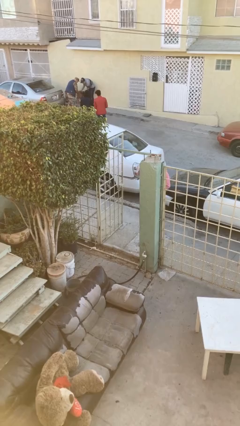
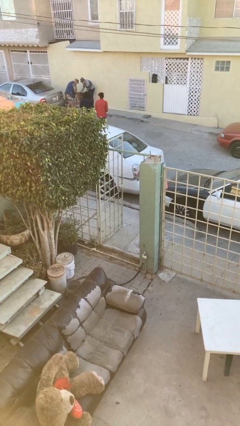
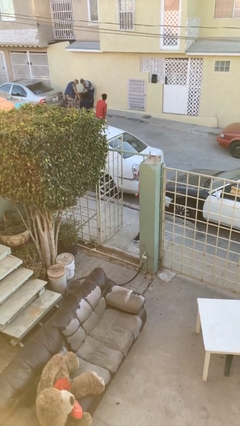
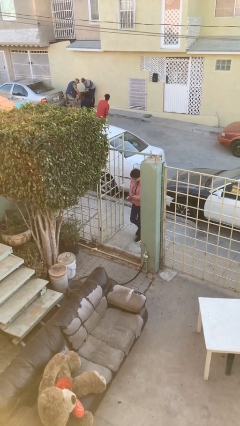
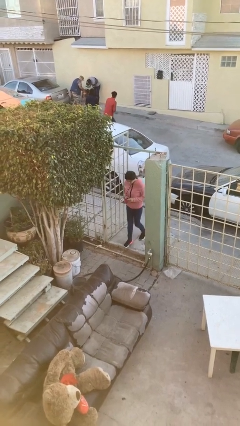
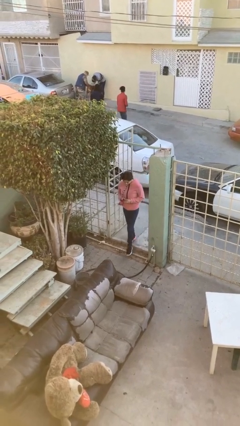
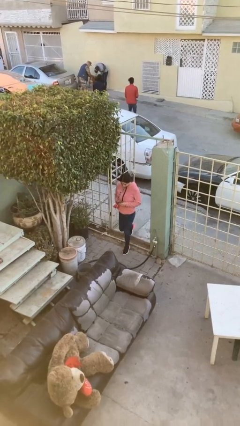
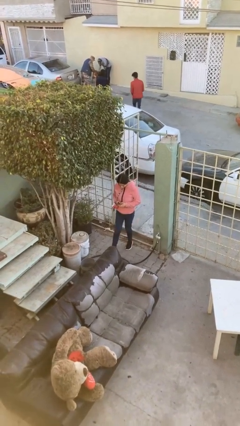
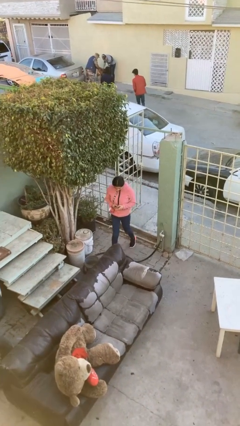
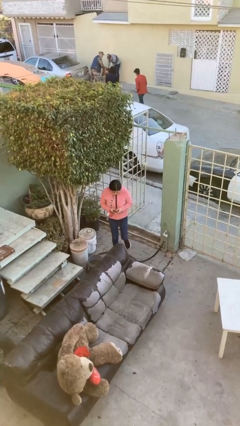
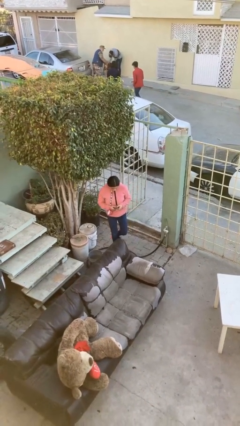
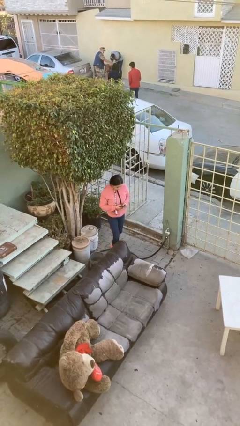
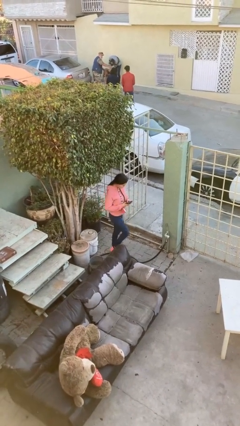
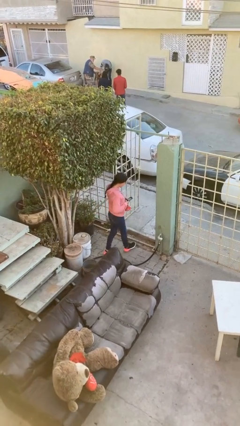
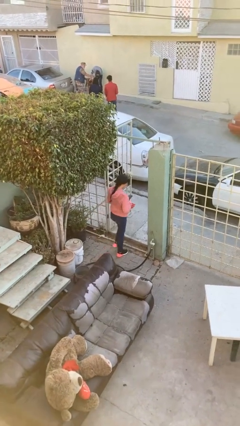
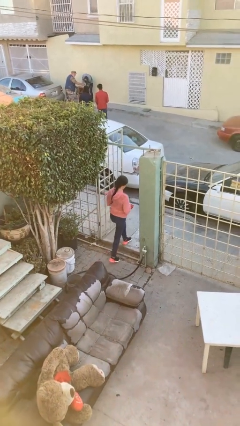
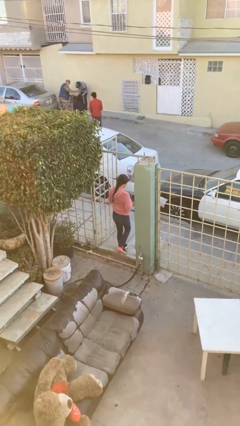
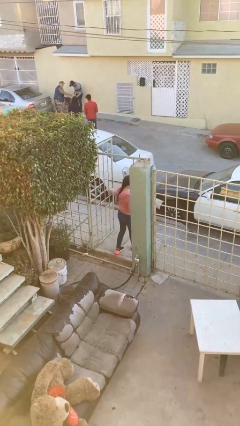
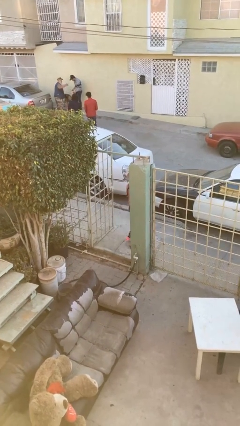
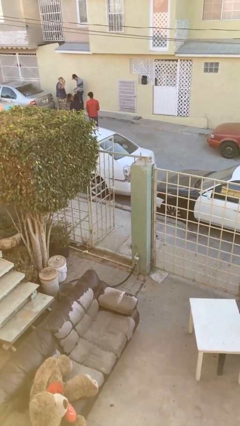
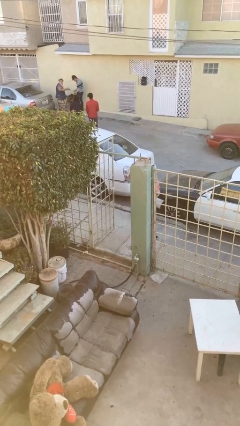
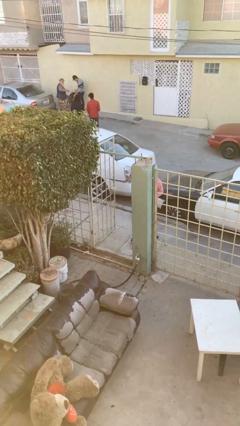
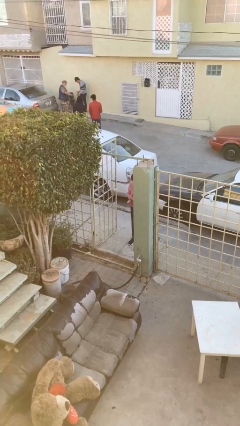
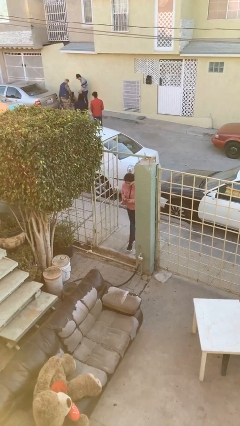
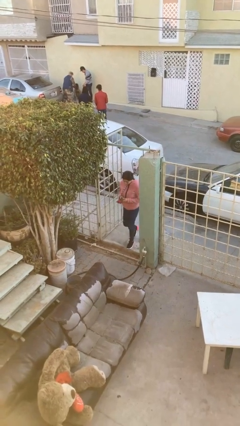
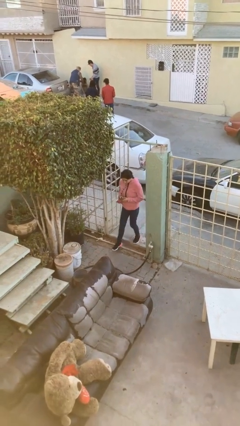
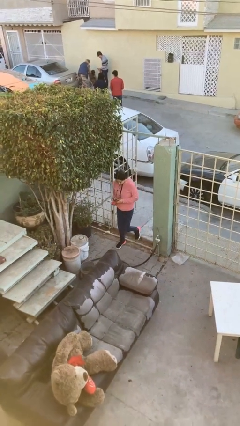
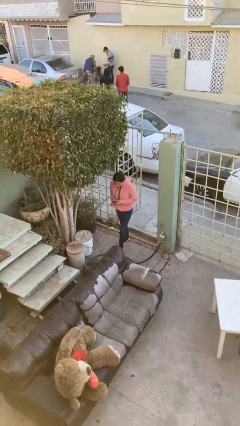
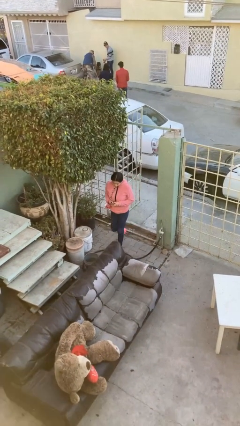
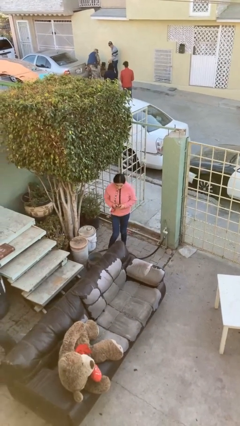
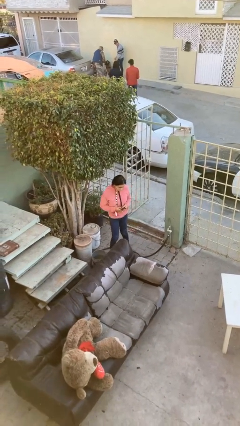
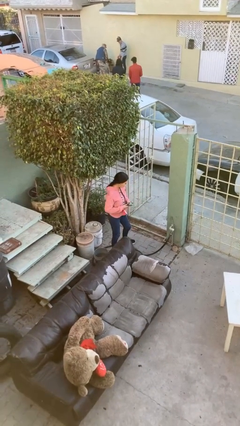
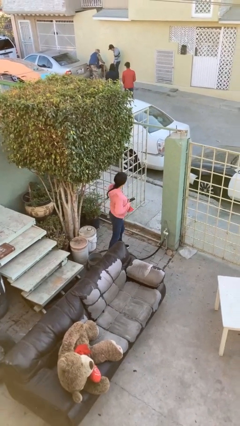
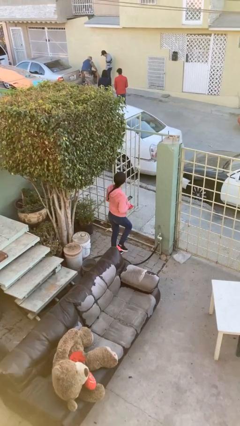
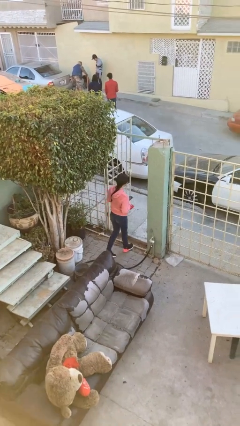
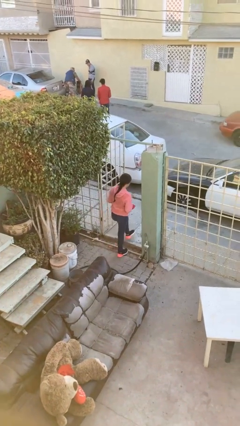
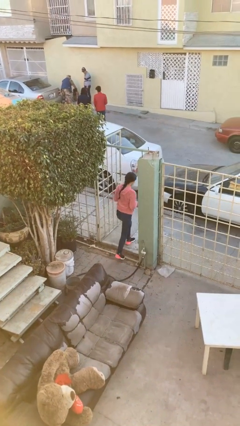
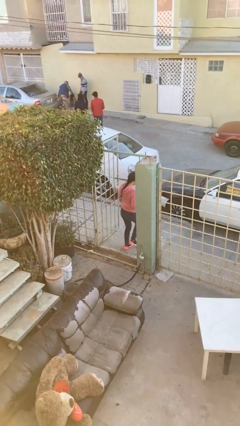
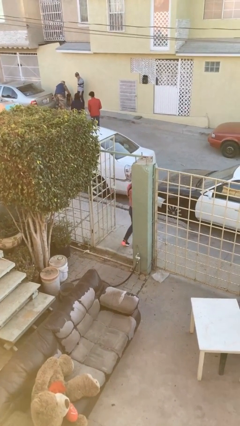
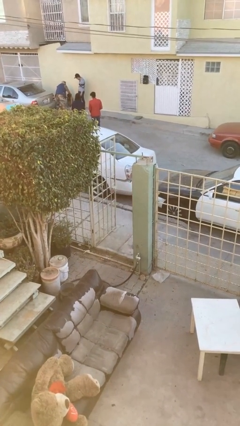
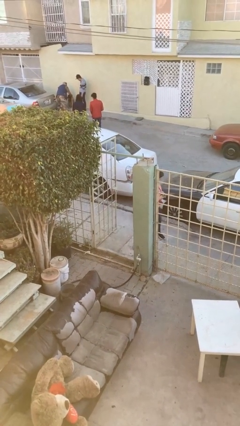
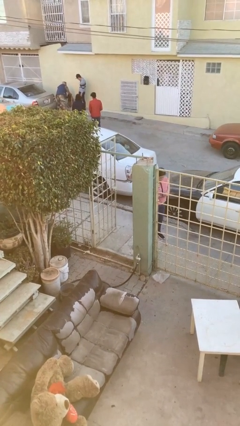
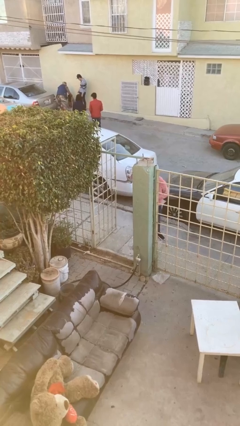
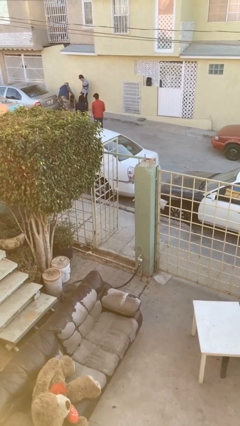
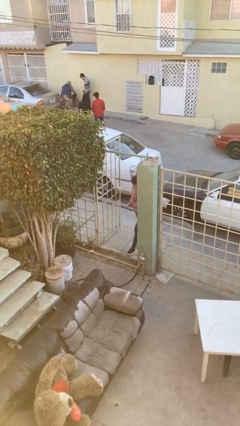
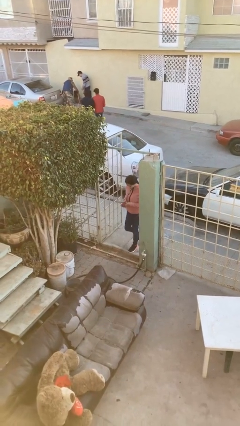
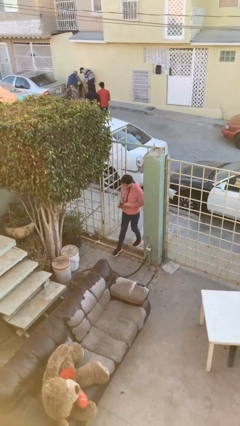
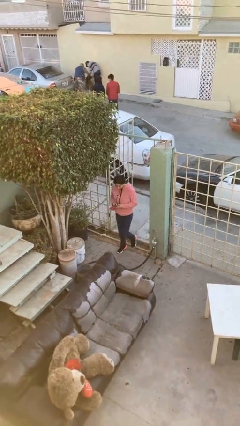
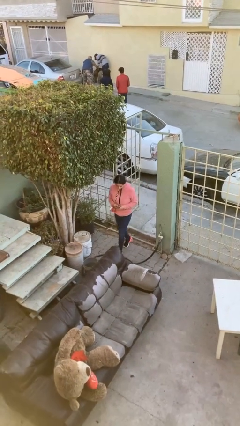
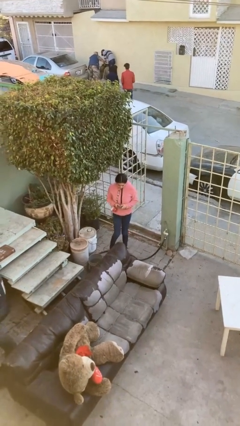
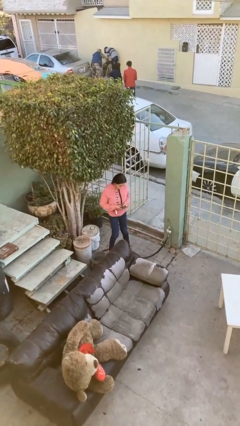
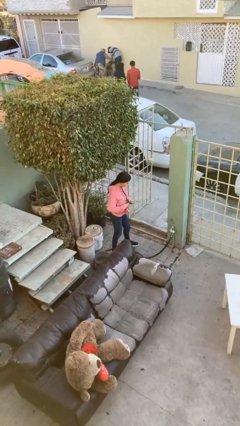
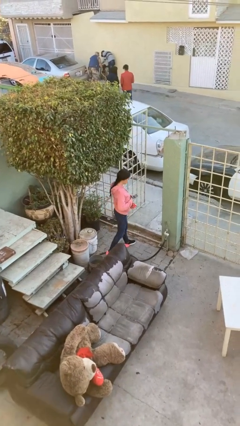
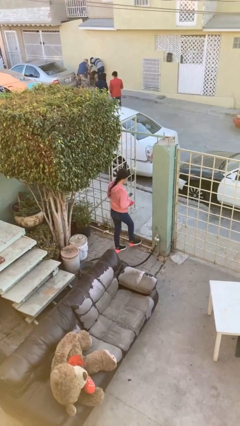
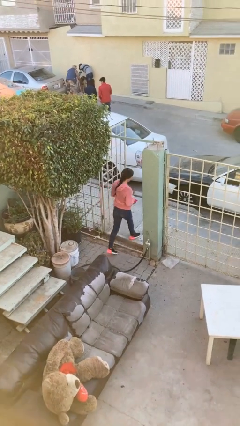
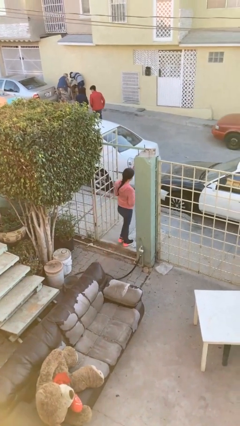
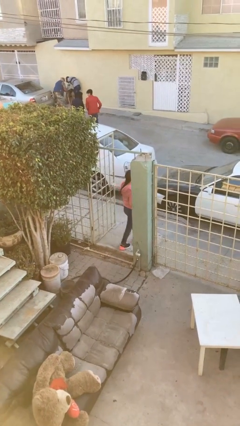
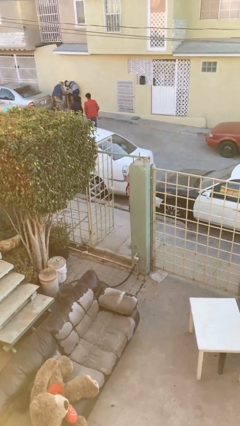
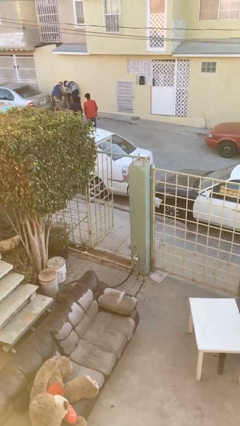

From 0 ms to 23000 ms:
person texts on phone

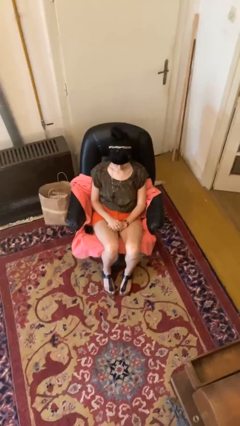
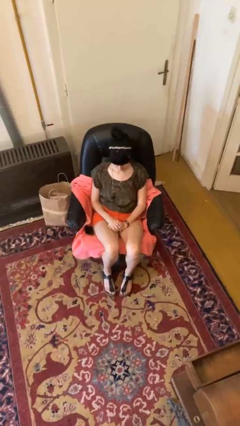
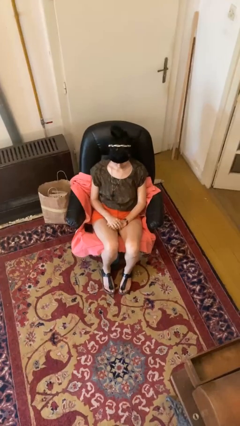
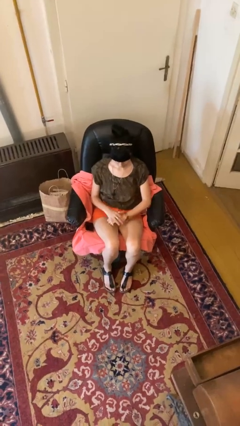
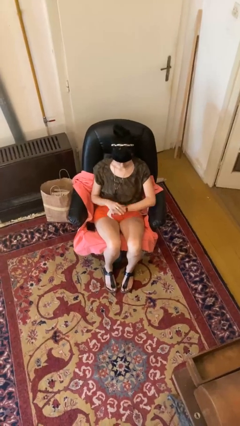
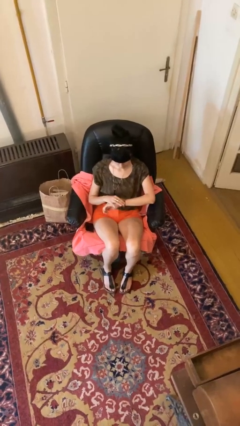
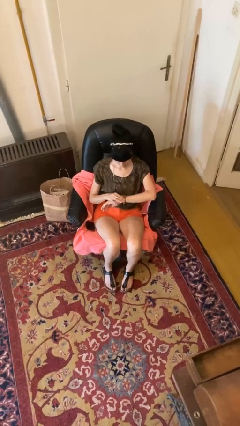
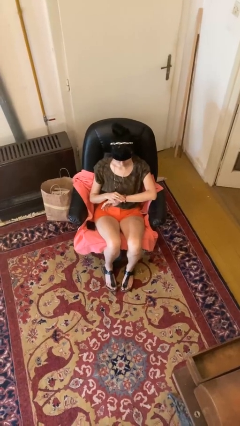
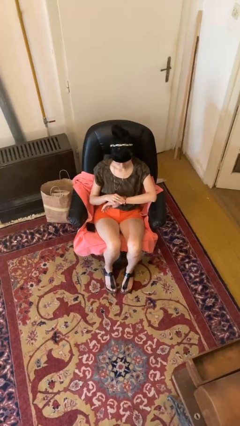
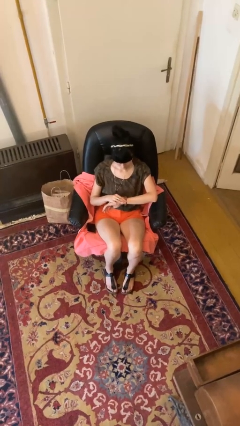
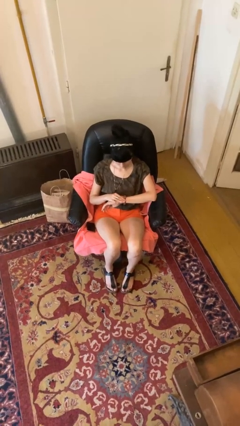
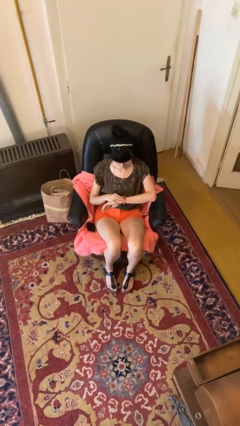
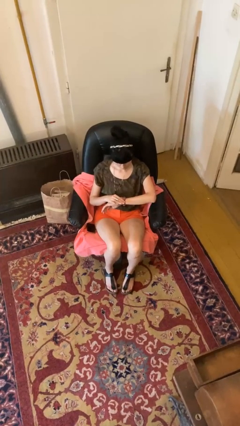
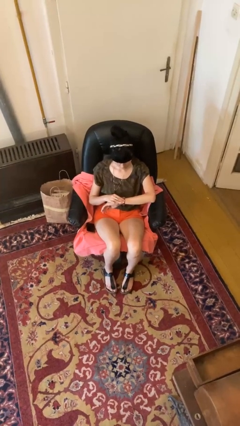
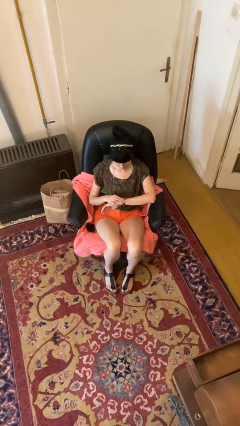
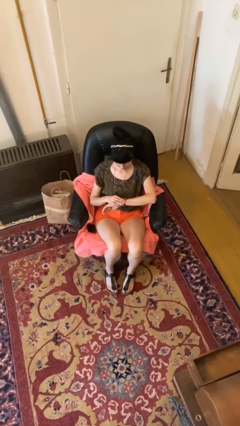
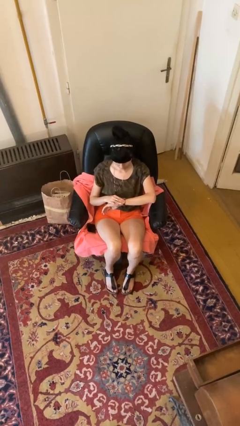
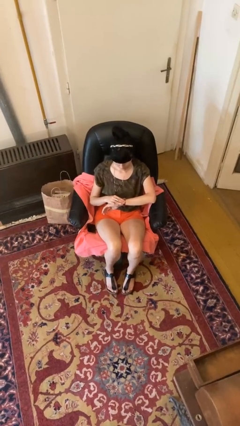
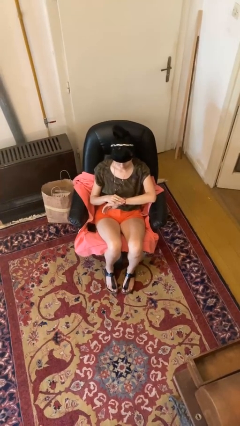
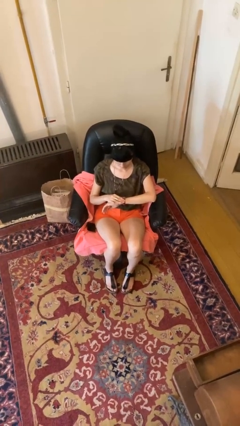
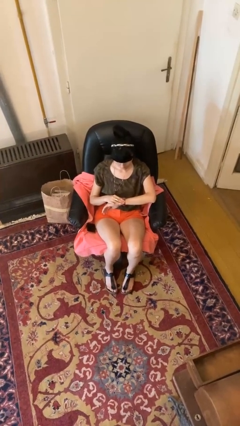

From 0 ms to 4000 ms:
person looks at wristwatch

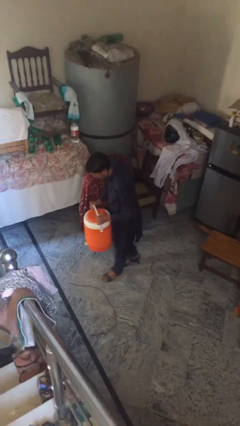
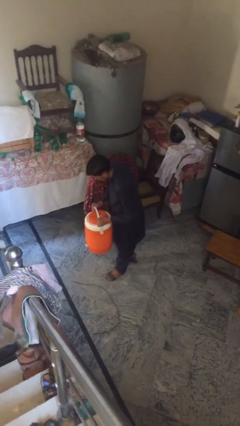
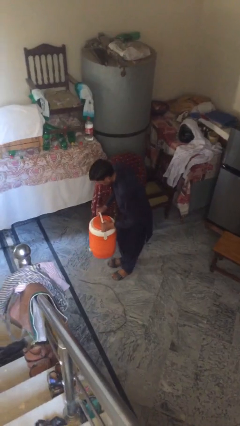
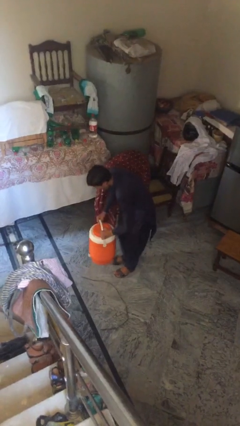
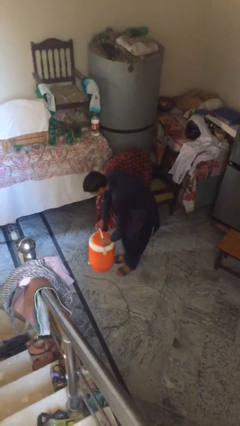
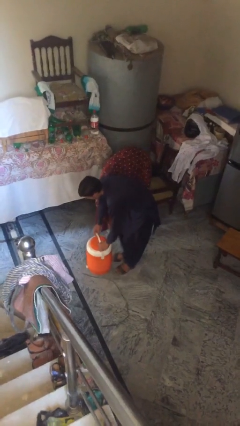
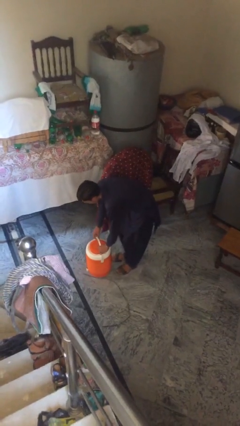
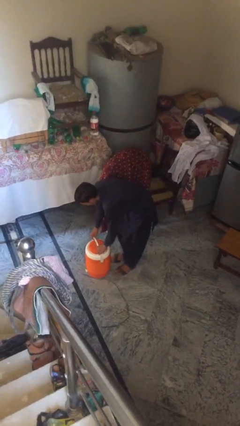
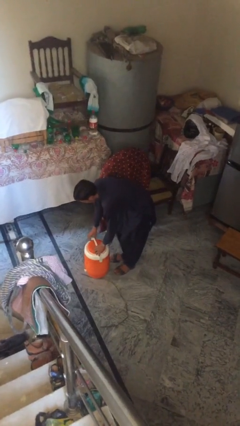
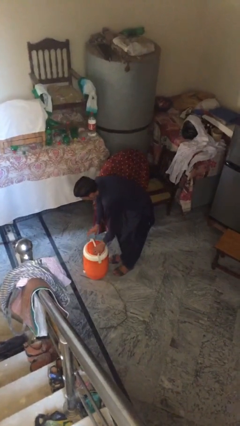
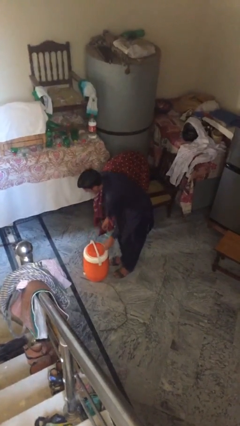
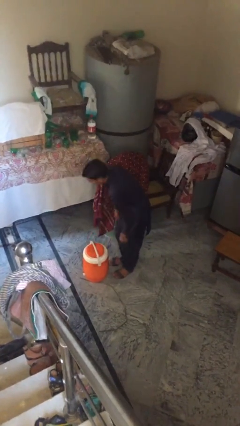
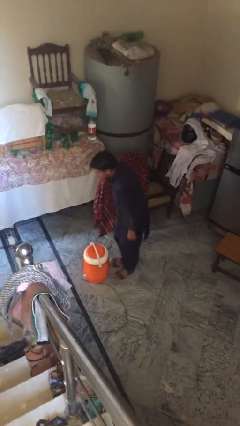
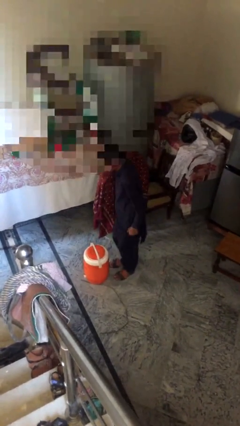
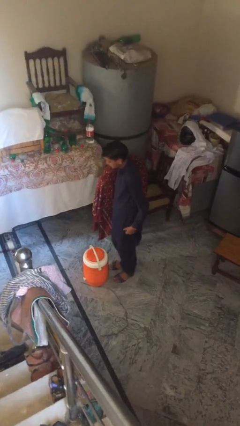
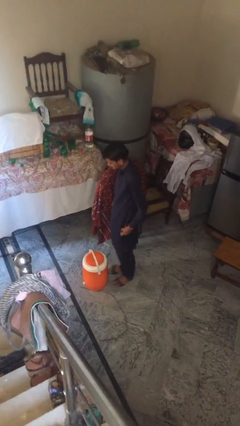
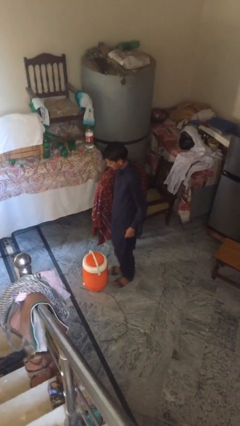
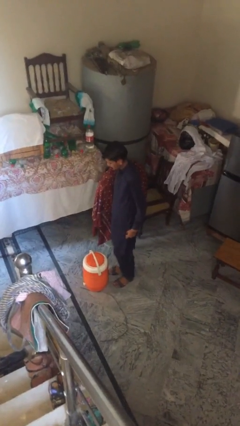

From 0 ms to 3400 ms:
person puts down object on floor
